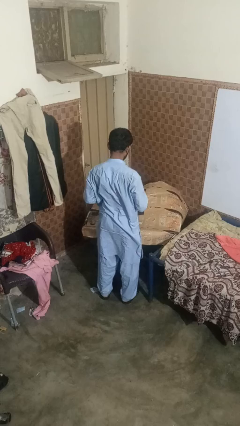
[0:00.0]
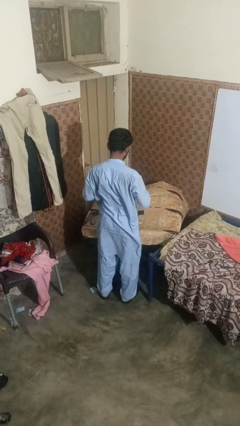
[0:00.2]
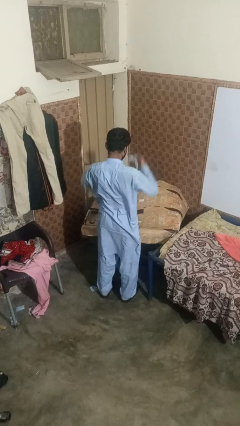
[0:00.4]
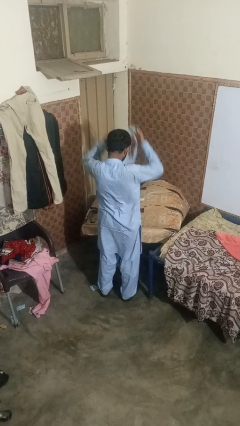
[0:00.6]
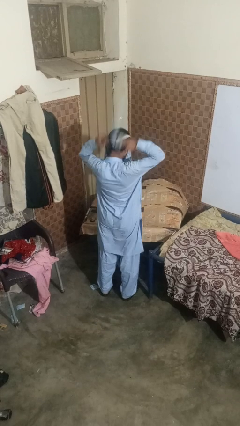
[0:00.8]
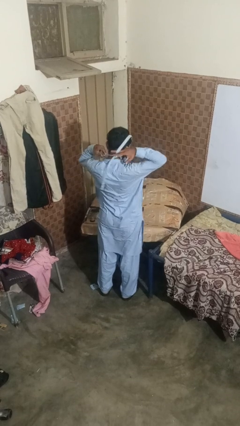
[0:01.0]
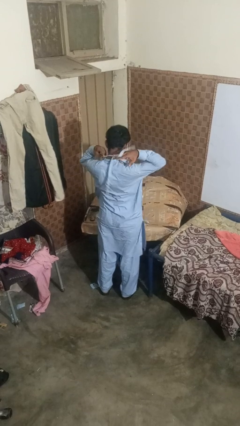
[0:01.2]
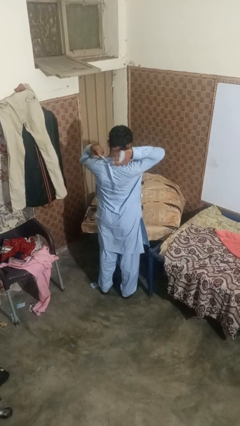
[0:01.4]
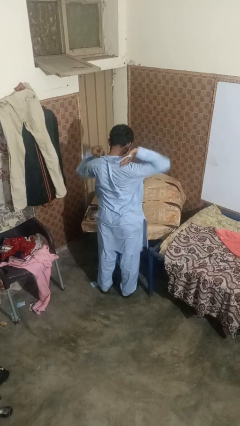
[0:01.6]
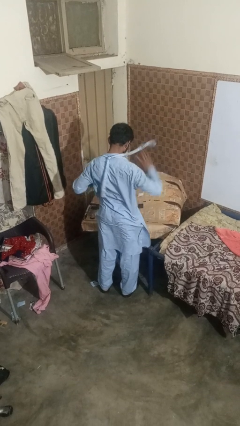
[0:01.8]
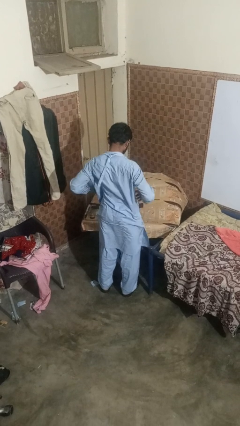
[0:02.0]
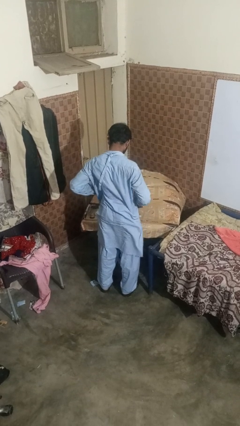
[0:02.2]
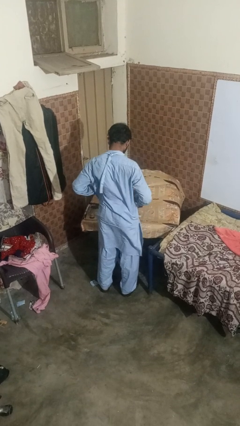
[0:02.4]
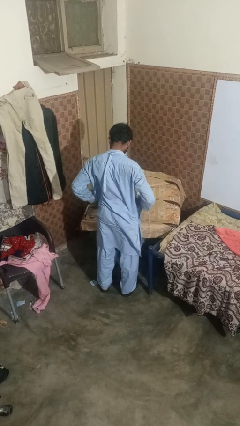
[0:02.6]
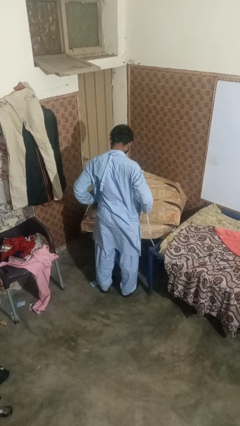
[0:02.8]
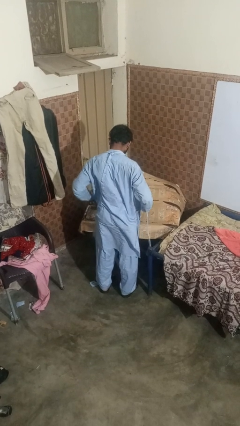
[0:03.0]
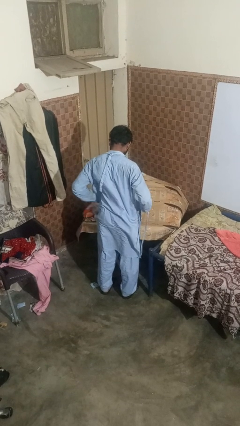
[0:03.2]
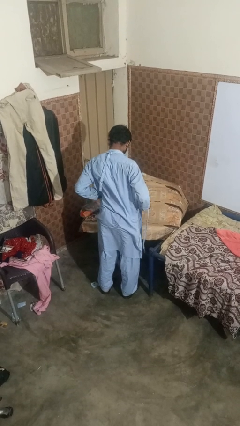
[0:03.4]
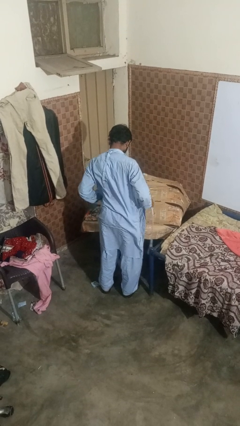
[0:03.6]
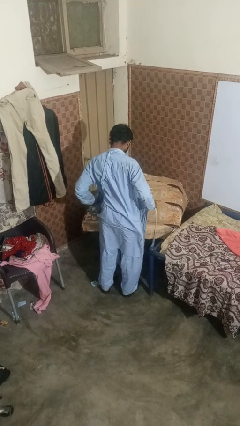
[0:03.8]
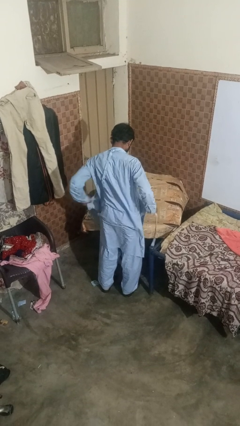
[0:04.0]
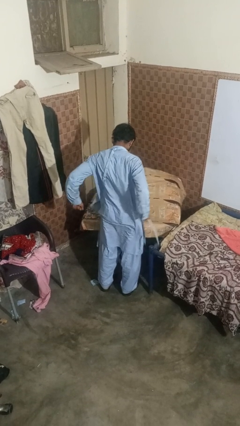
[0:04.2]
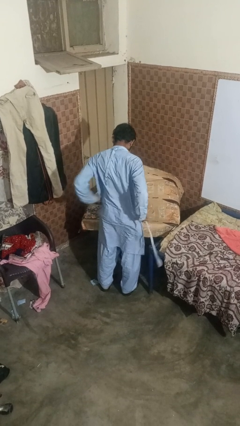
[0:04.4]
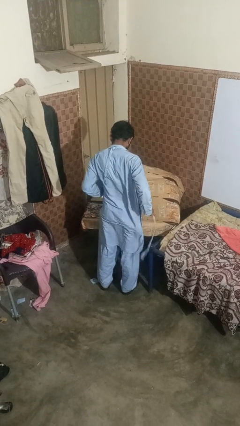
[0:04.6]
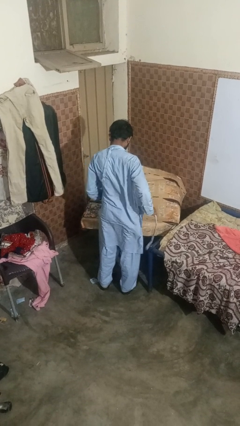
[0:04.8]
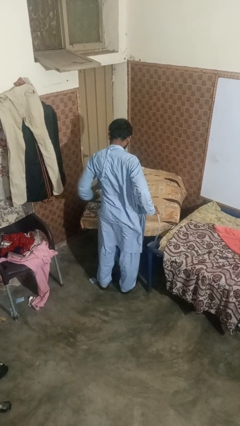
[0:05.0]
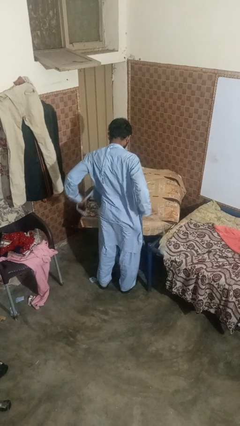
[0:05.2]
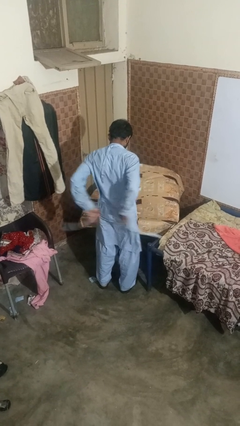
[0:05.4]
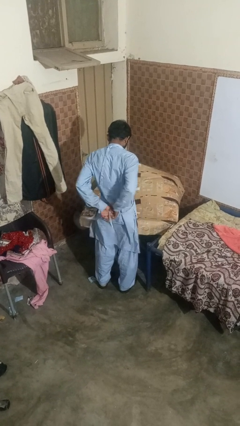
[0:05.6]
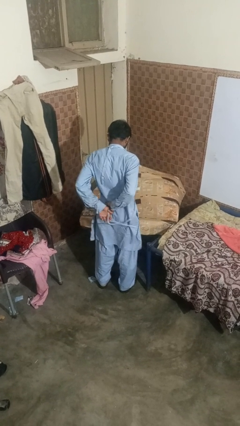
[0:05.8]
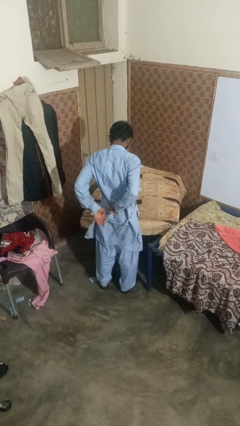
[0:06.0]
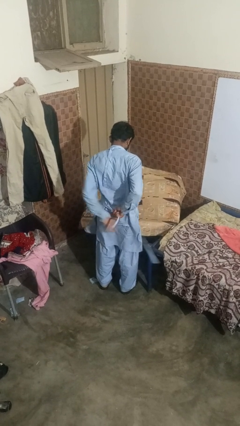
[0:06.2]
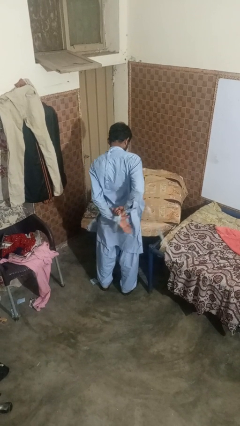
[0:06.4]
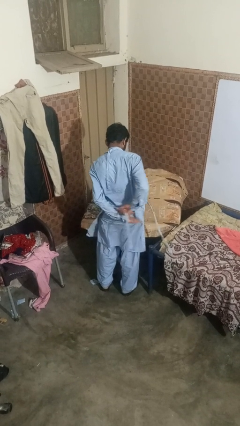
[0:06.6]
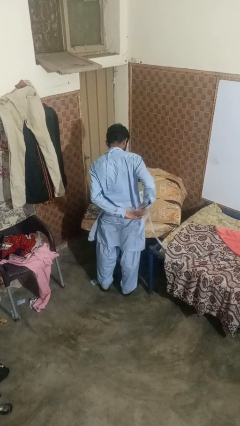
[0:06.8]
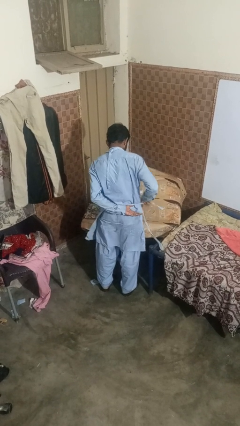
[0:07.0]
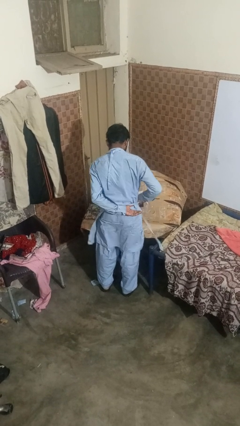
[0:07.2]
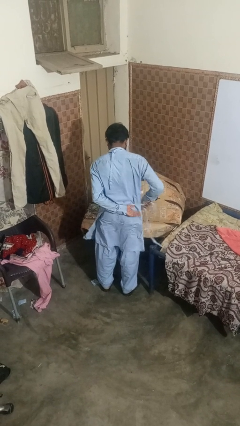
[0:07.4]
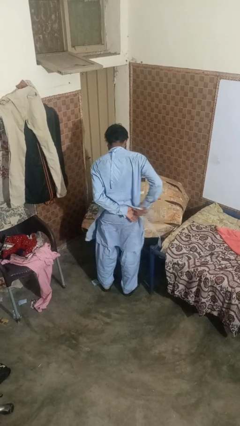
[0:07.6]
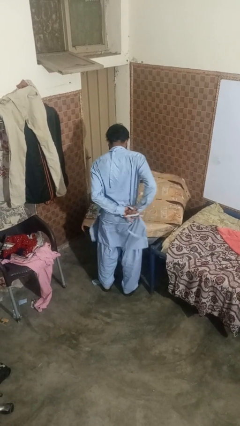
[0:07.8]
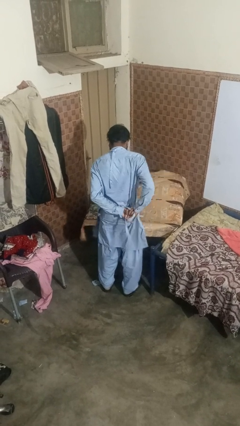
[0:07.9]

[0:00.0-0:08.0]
person puts on apron

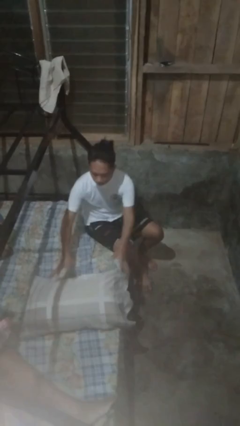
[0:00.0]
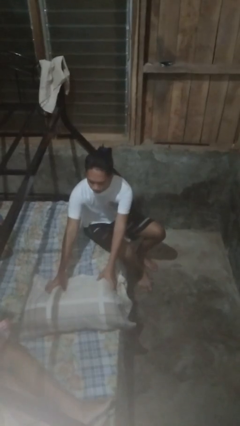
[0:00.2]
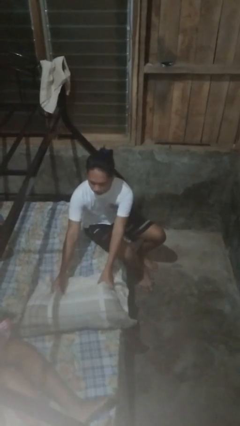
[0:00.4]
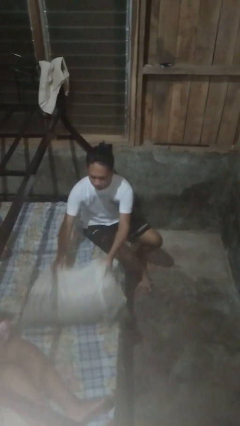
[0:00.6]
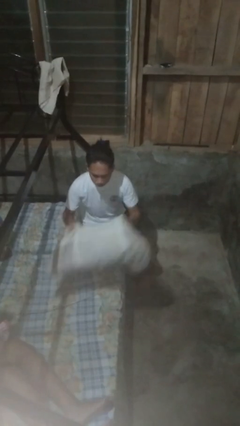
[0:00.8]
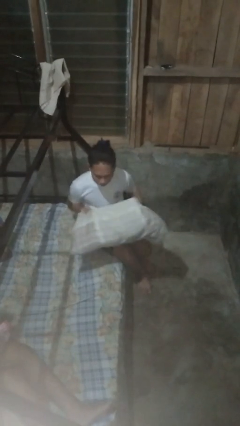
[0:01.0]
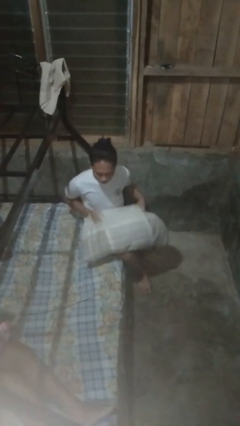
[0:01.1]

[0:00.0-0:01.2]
person picks up object from bed

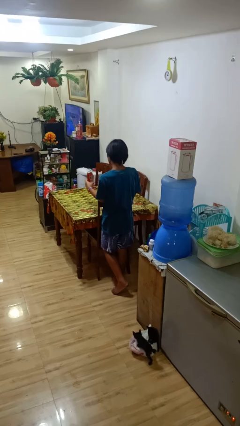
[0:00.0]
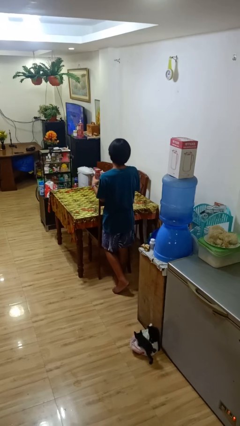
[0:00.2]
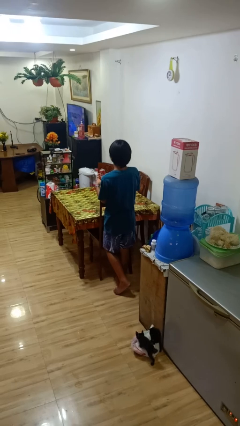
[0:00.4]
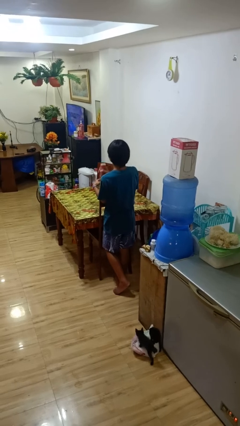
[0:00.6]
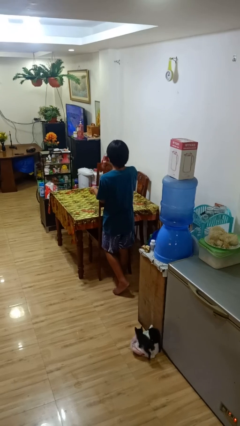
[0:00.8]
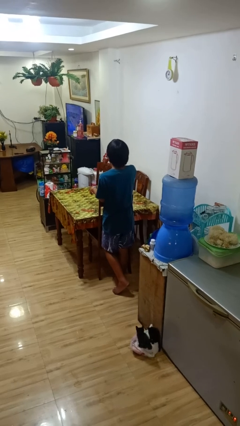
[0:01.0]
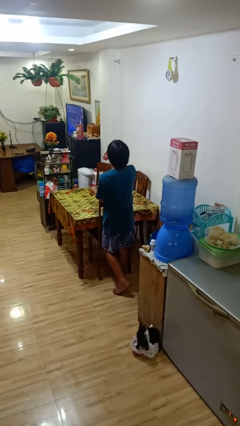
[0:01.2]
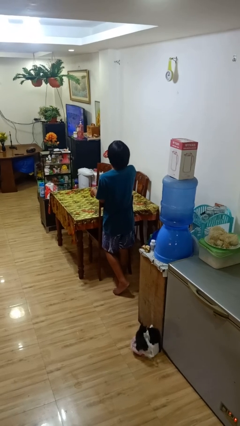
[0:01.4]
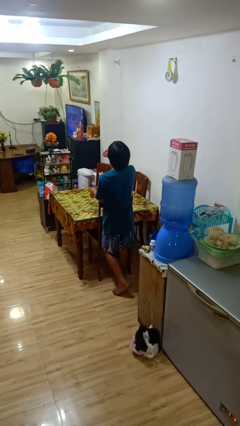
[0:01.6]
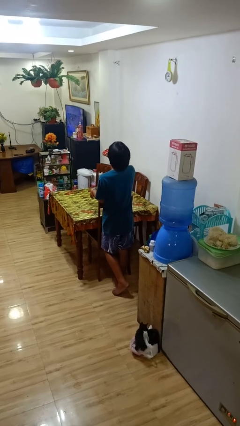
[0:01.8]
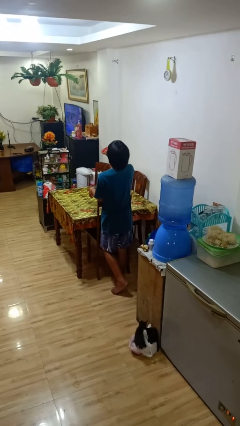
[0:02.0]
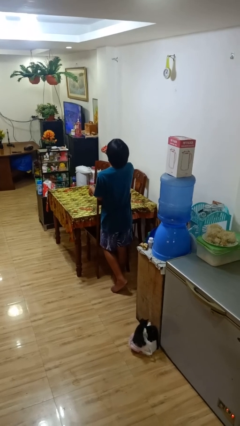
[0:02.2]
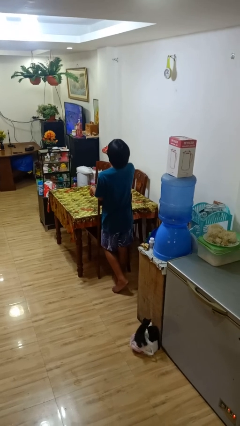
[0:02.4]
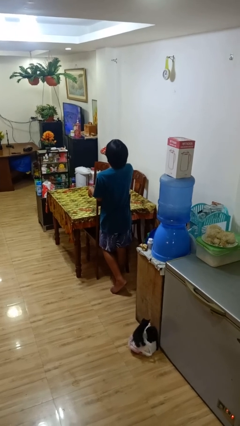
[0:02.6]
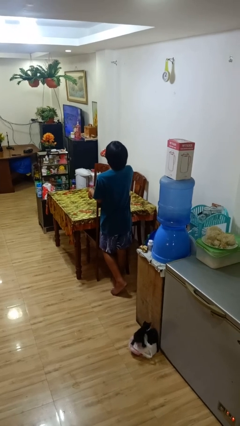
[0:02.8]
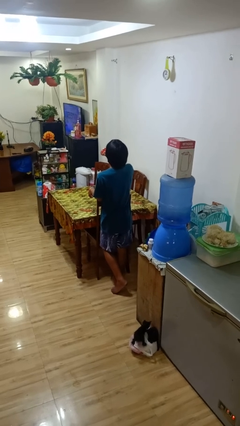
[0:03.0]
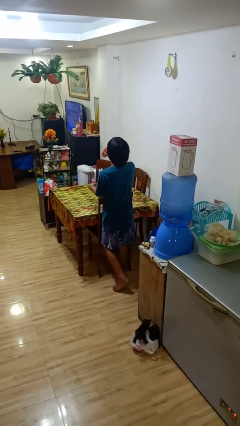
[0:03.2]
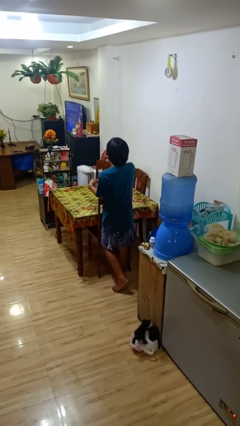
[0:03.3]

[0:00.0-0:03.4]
person drinks from beverage can

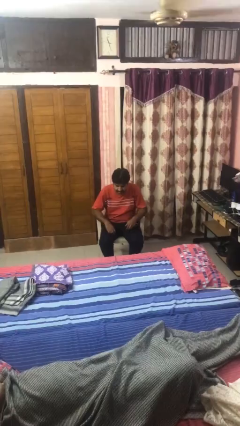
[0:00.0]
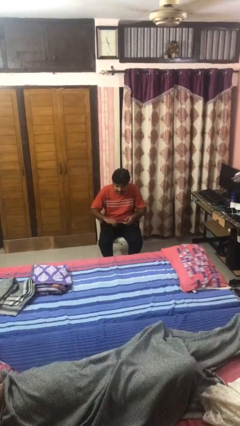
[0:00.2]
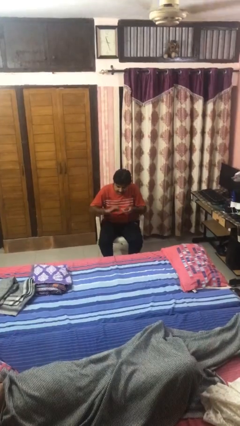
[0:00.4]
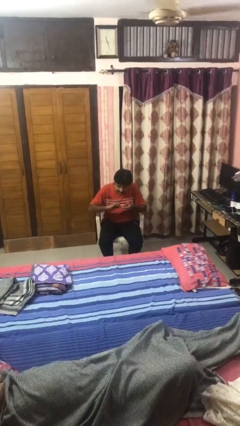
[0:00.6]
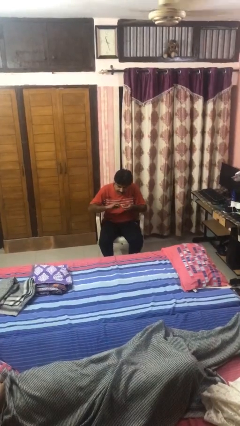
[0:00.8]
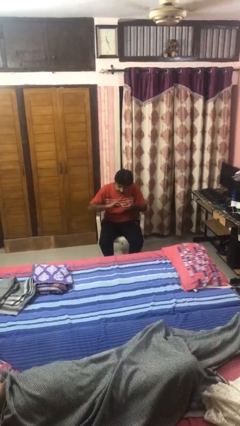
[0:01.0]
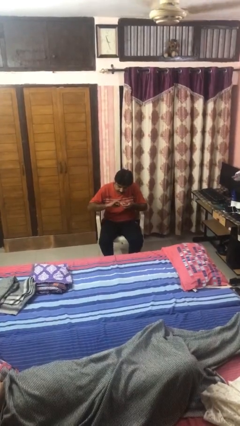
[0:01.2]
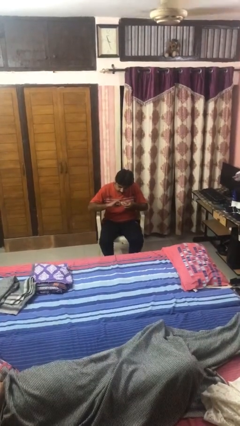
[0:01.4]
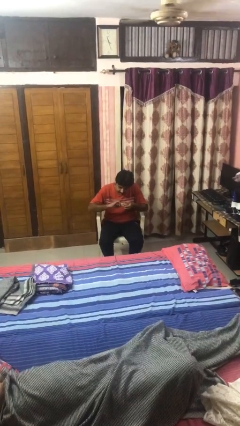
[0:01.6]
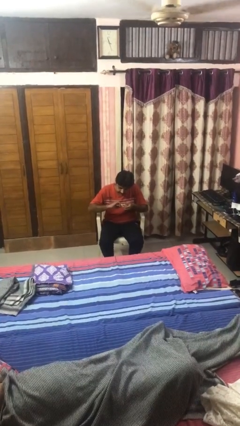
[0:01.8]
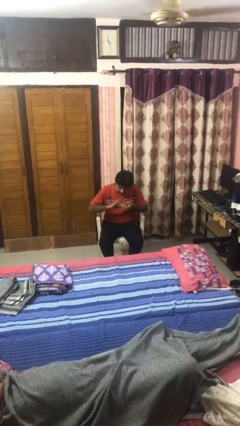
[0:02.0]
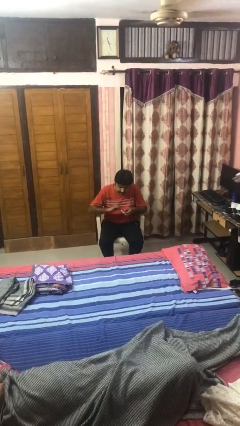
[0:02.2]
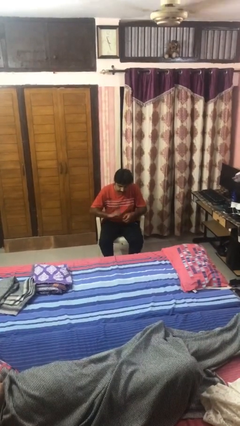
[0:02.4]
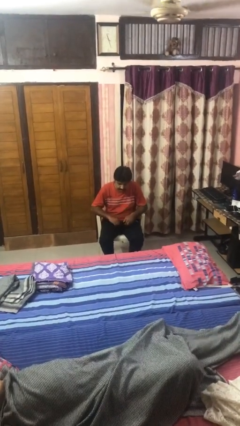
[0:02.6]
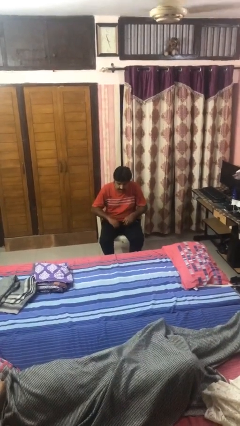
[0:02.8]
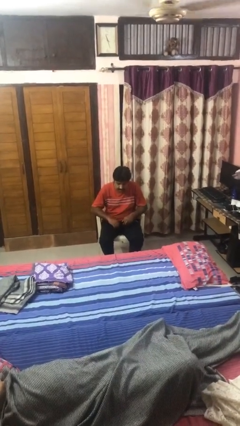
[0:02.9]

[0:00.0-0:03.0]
person clips fingernails

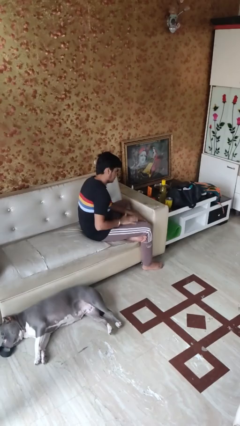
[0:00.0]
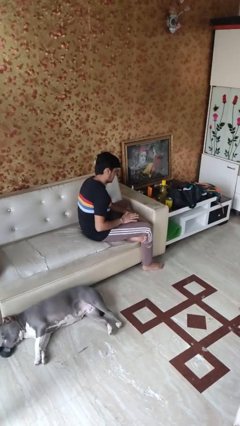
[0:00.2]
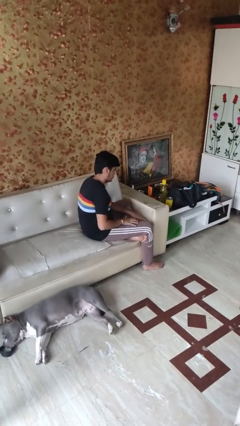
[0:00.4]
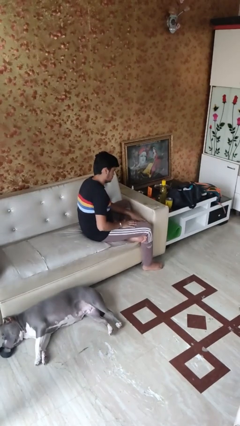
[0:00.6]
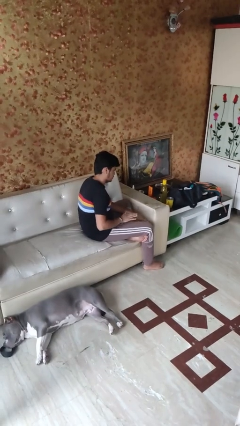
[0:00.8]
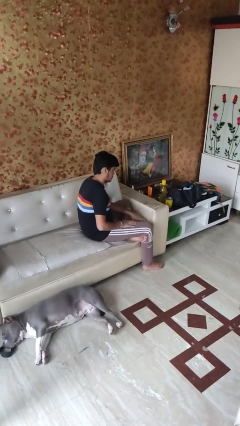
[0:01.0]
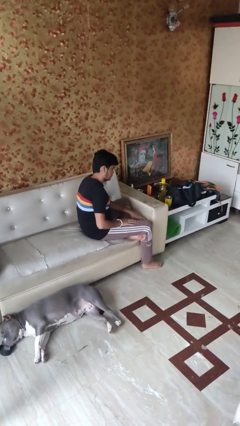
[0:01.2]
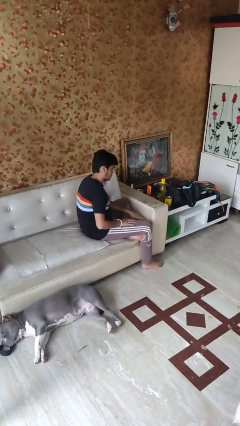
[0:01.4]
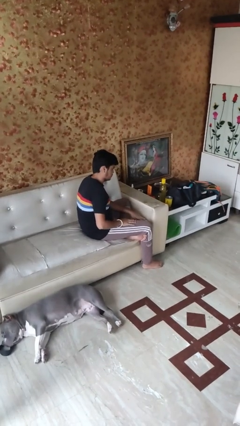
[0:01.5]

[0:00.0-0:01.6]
person slaps hands on thighs

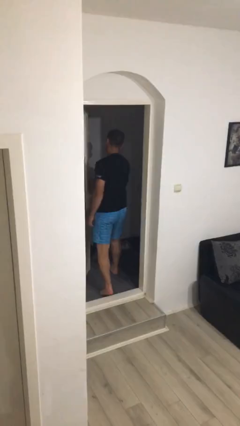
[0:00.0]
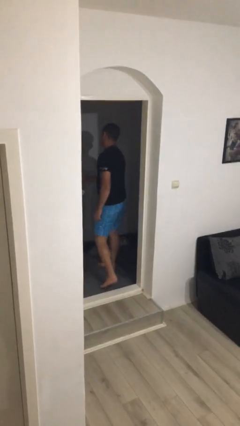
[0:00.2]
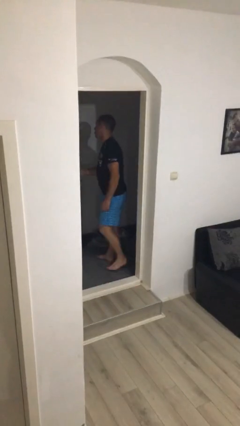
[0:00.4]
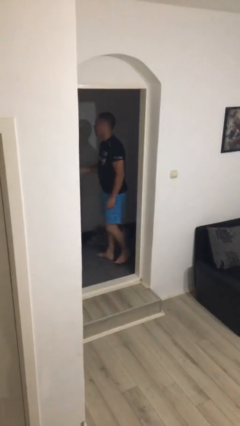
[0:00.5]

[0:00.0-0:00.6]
person opens facility door
